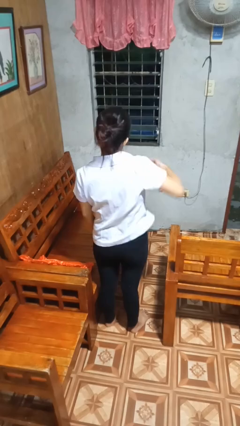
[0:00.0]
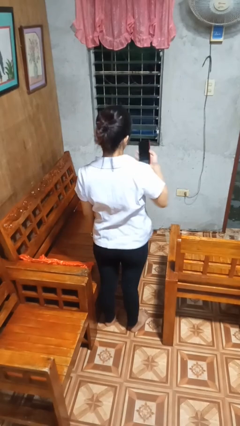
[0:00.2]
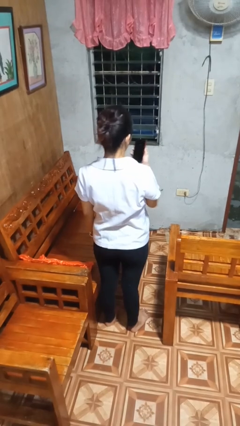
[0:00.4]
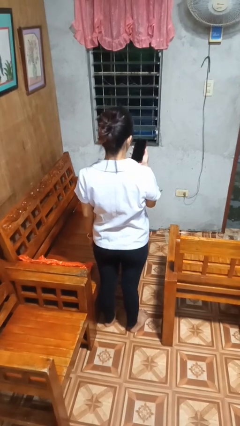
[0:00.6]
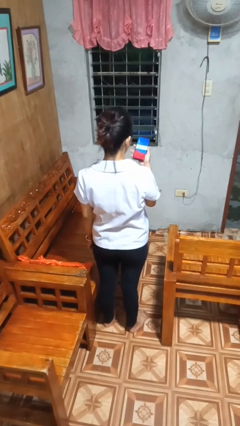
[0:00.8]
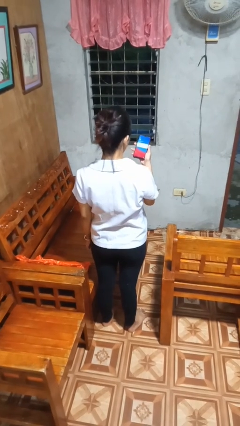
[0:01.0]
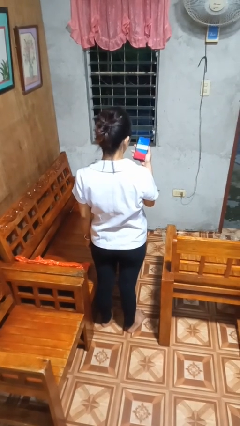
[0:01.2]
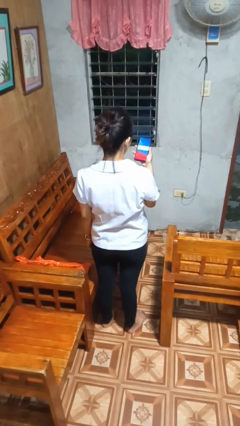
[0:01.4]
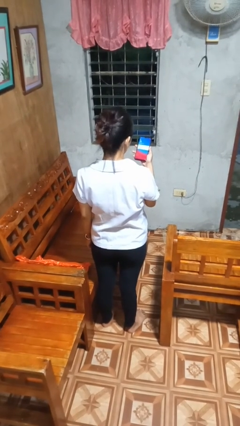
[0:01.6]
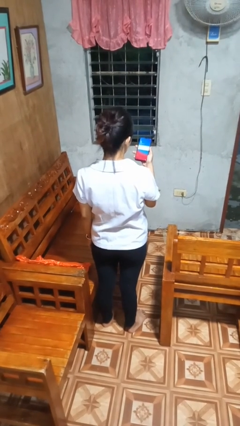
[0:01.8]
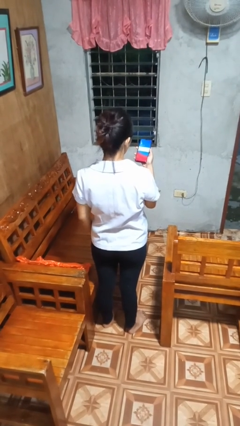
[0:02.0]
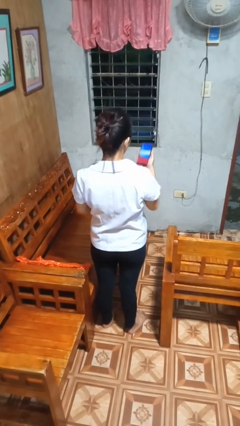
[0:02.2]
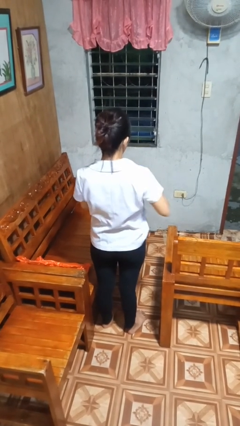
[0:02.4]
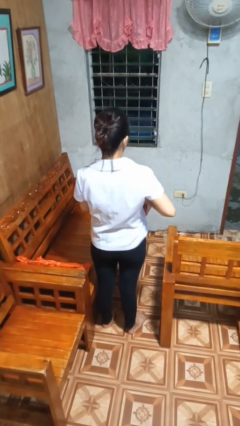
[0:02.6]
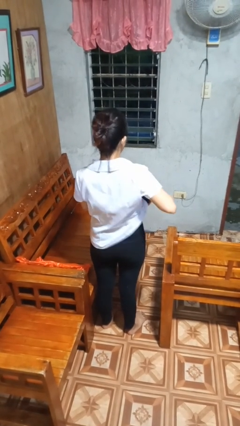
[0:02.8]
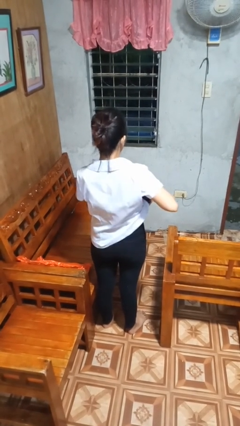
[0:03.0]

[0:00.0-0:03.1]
person takes phone from pocket

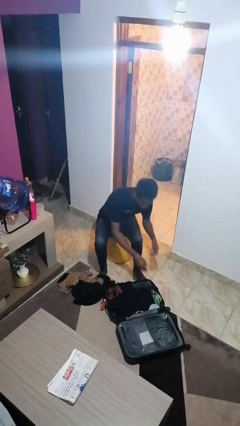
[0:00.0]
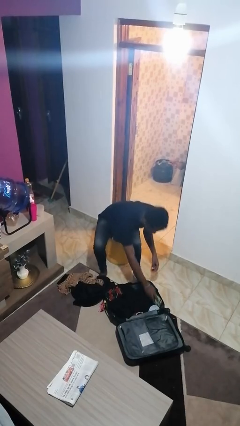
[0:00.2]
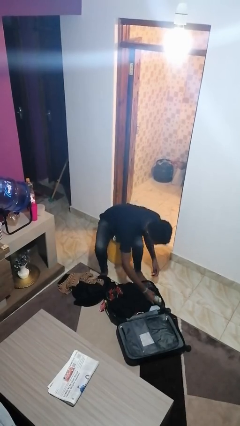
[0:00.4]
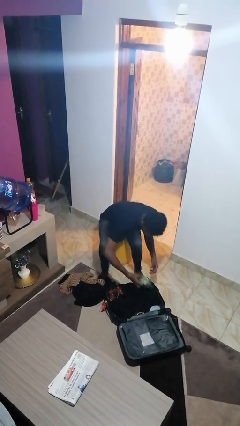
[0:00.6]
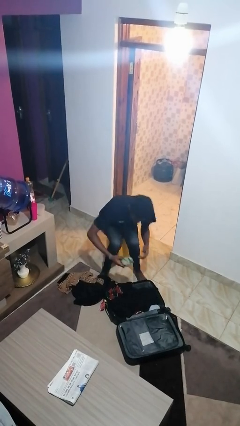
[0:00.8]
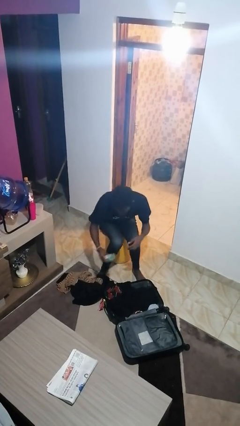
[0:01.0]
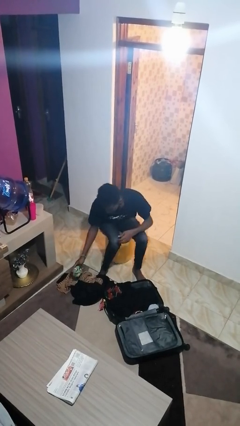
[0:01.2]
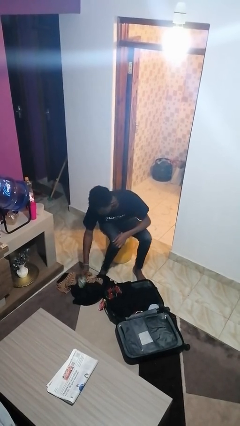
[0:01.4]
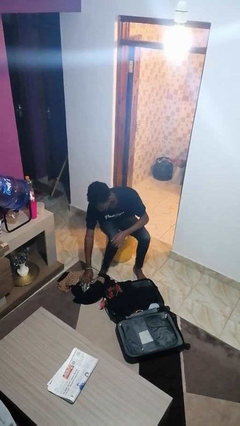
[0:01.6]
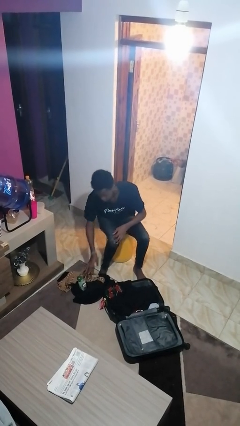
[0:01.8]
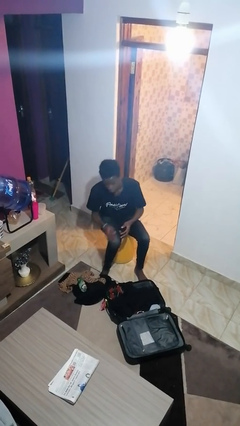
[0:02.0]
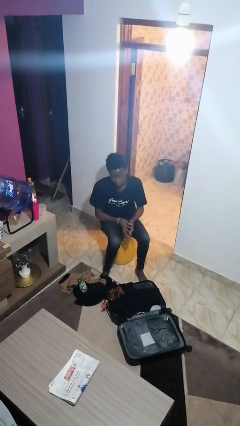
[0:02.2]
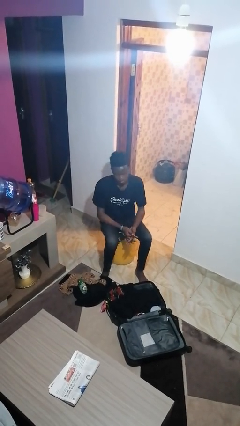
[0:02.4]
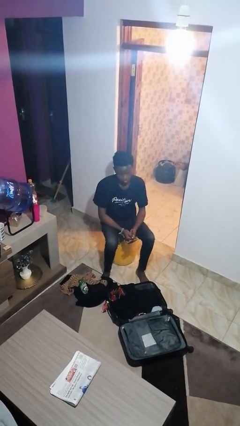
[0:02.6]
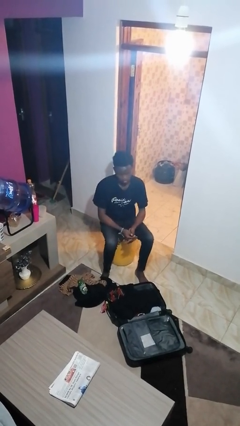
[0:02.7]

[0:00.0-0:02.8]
person unloads clothes from suitcase

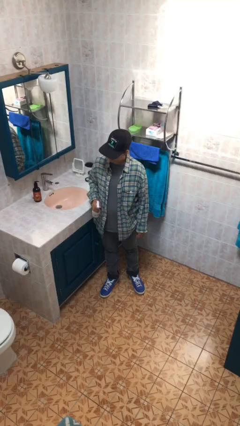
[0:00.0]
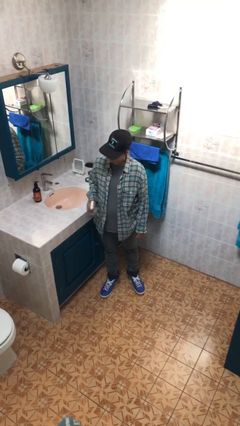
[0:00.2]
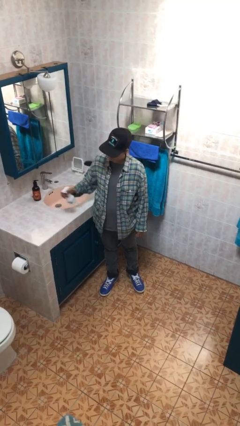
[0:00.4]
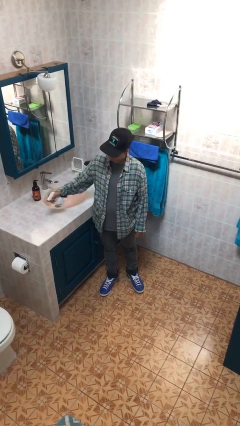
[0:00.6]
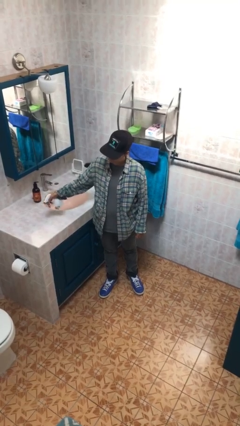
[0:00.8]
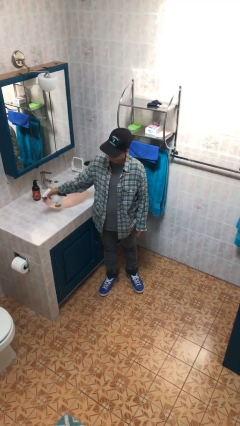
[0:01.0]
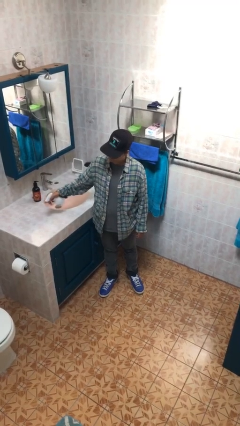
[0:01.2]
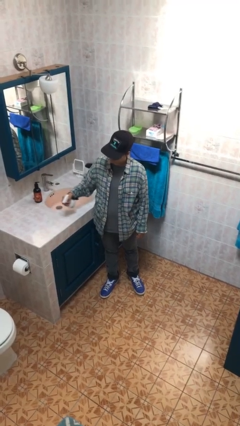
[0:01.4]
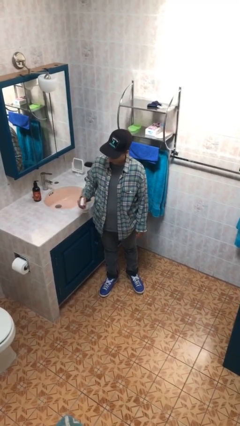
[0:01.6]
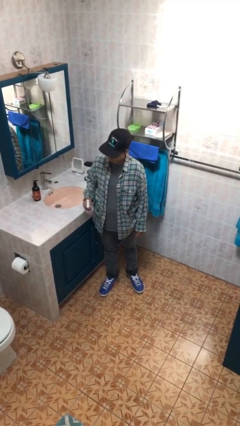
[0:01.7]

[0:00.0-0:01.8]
person sprays from bottle

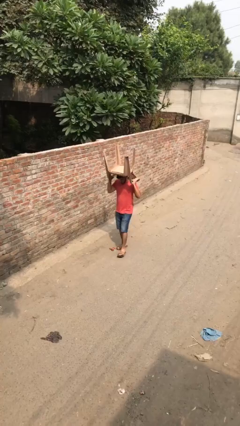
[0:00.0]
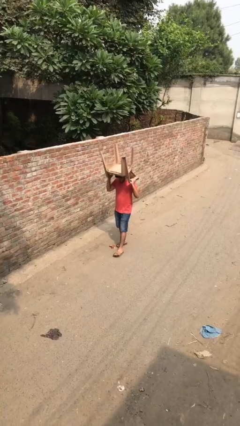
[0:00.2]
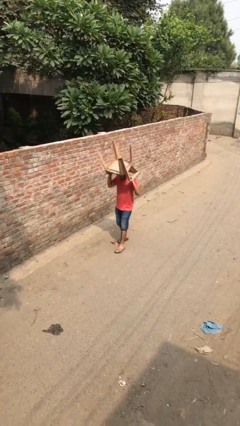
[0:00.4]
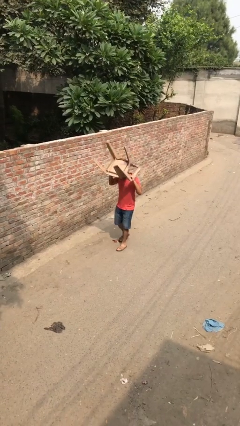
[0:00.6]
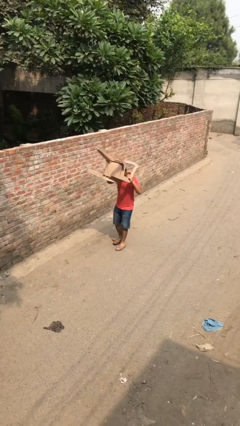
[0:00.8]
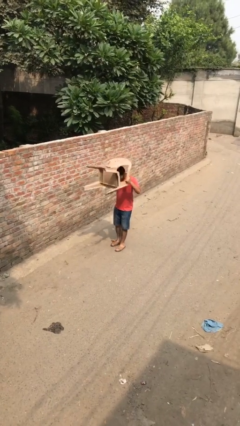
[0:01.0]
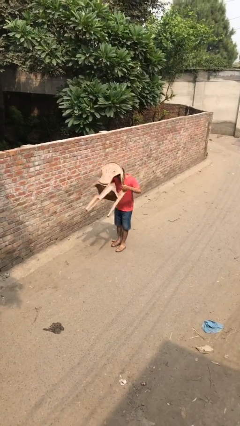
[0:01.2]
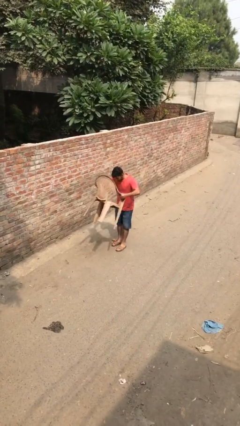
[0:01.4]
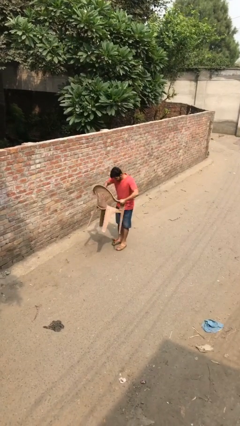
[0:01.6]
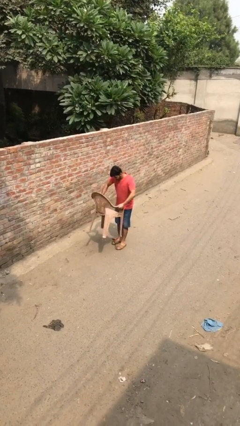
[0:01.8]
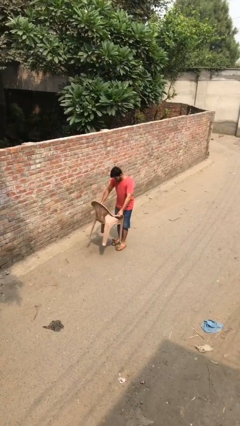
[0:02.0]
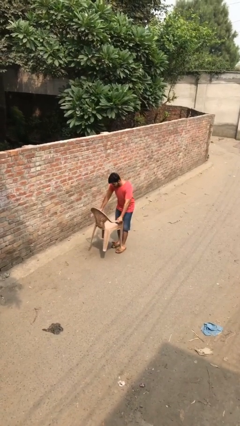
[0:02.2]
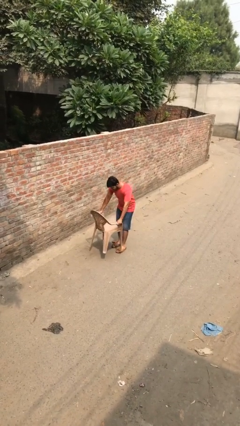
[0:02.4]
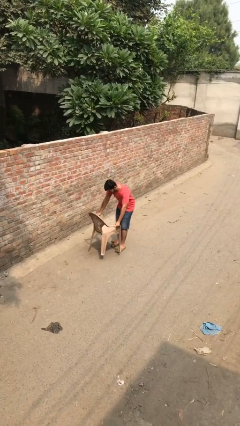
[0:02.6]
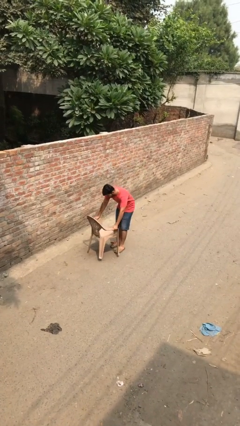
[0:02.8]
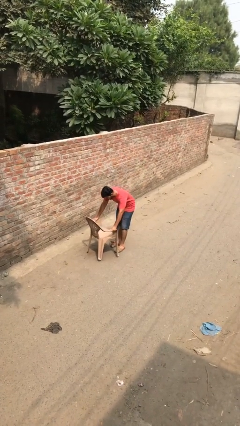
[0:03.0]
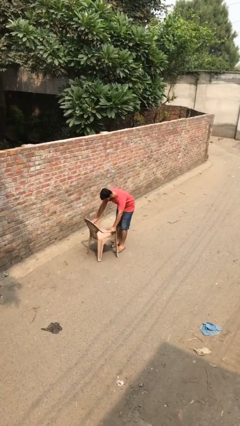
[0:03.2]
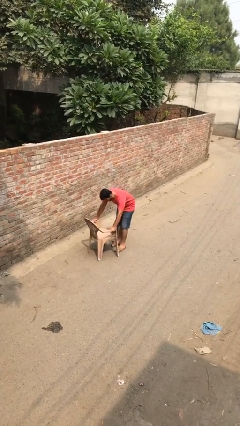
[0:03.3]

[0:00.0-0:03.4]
person puts down object on floor

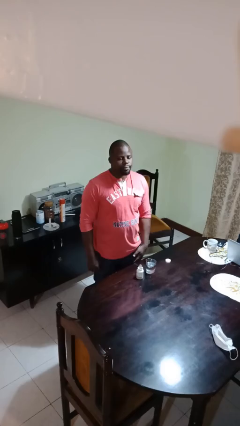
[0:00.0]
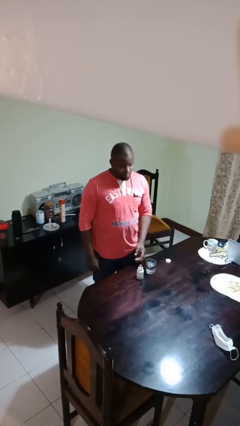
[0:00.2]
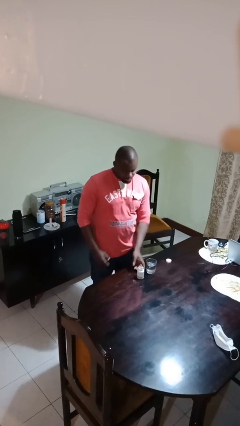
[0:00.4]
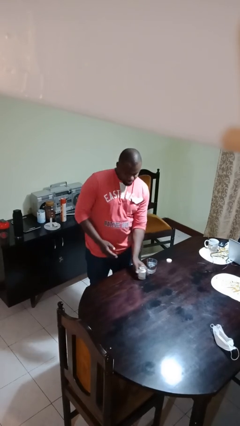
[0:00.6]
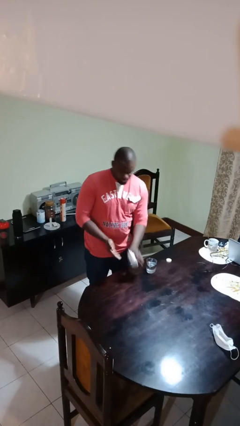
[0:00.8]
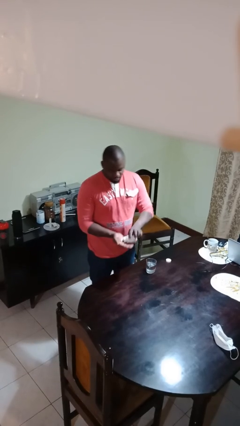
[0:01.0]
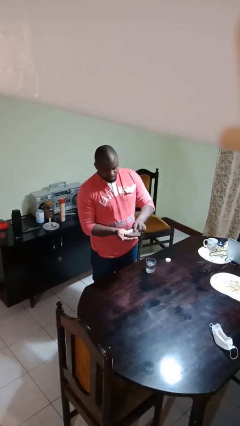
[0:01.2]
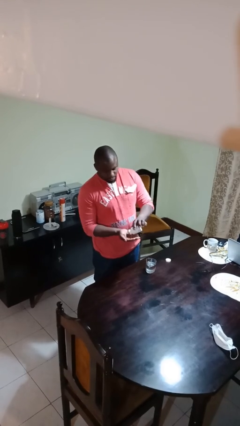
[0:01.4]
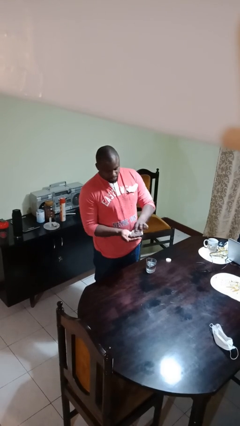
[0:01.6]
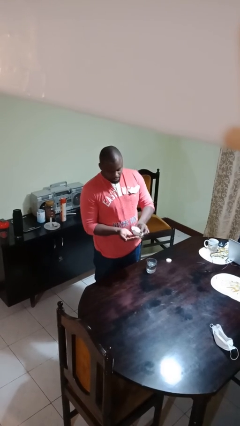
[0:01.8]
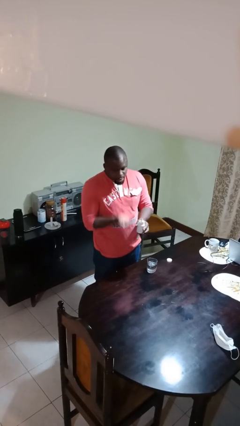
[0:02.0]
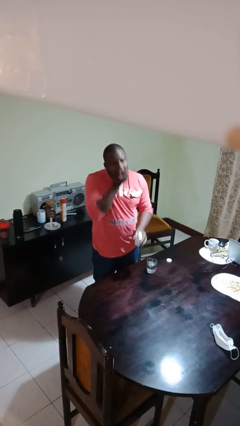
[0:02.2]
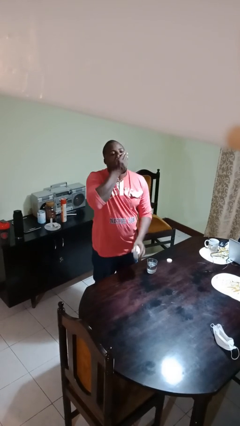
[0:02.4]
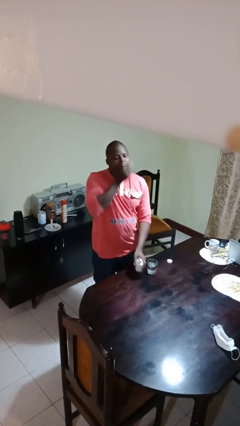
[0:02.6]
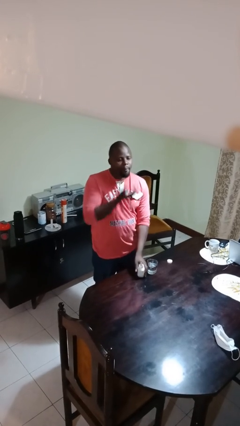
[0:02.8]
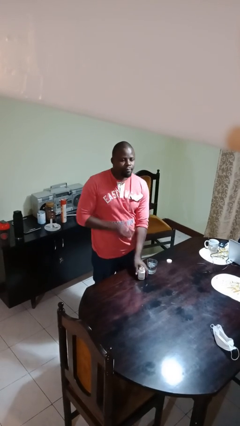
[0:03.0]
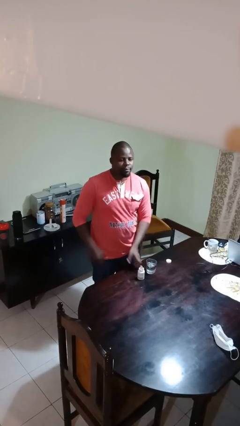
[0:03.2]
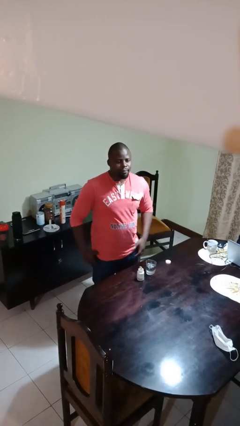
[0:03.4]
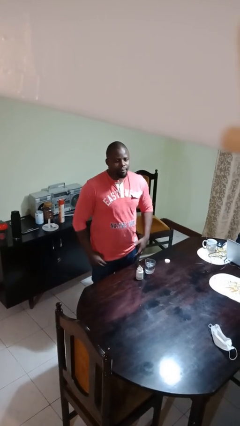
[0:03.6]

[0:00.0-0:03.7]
person takes medicine pills

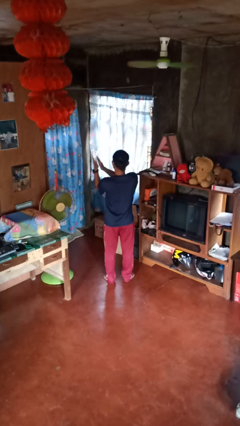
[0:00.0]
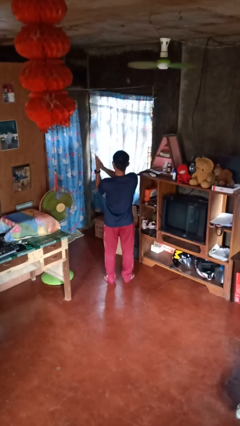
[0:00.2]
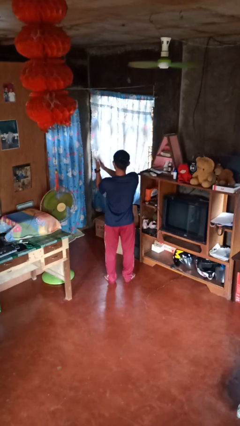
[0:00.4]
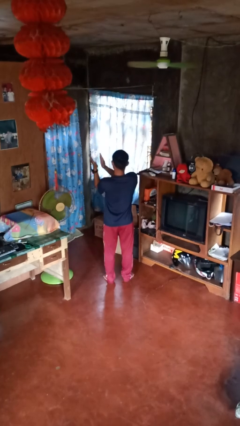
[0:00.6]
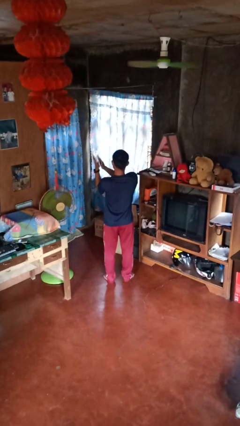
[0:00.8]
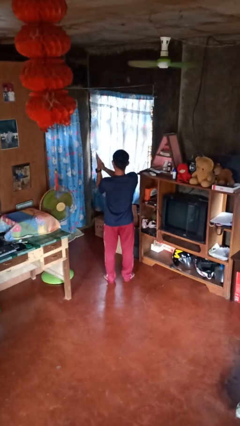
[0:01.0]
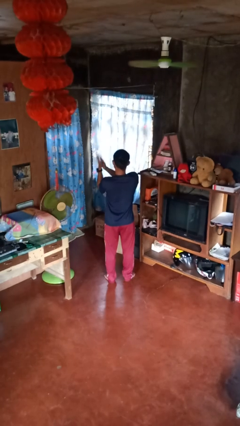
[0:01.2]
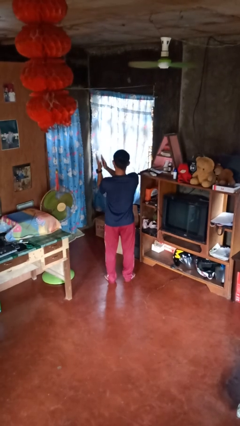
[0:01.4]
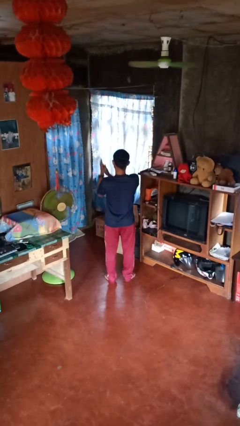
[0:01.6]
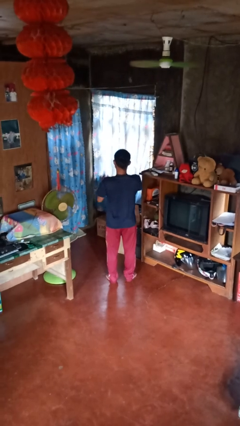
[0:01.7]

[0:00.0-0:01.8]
person claps hands

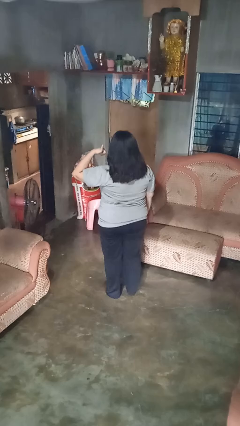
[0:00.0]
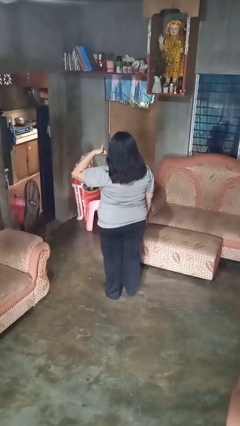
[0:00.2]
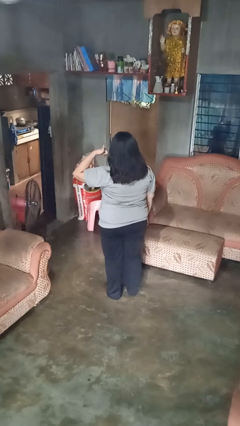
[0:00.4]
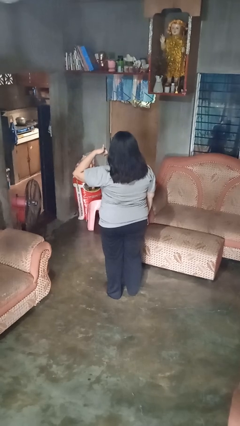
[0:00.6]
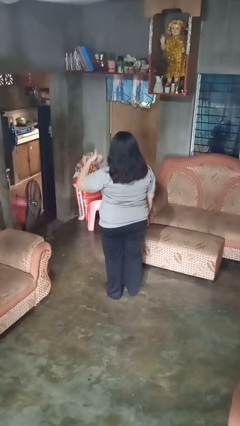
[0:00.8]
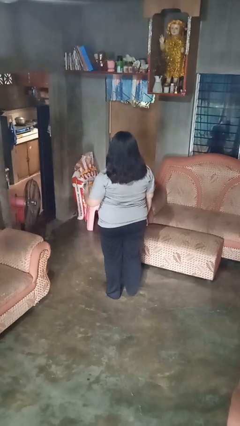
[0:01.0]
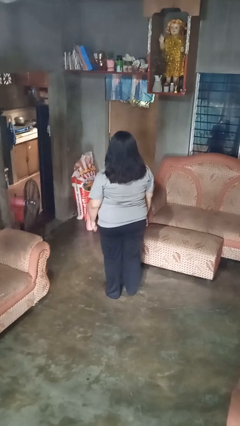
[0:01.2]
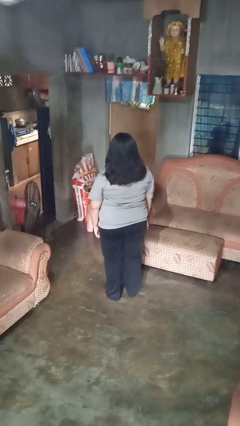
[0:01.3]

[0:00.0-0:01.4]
person gestures call me
